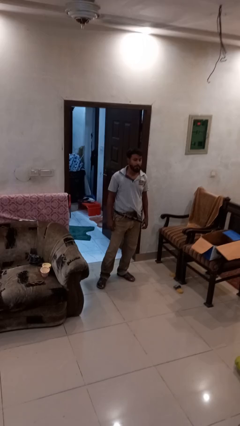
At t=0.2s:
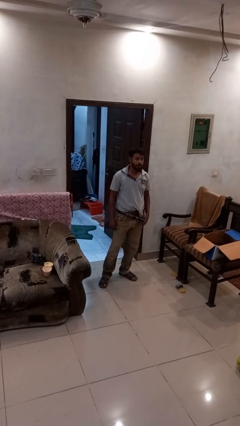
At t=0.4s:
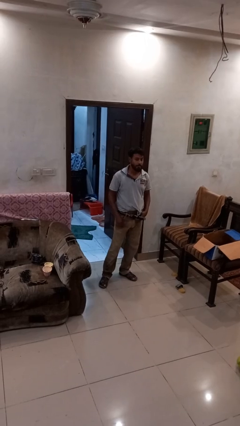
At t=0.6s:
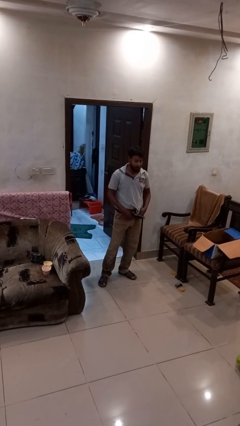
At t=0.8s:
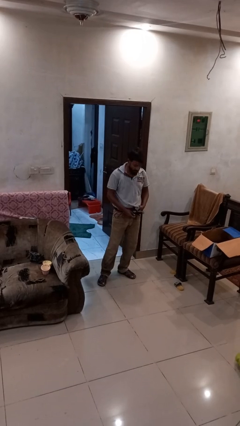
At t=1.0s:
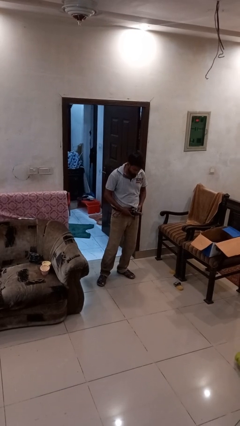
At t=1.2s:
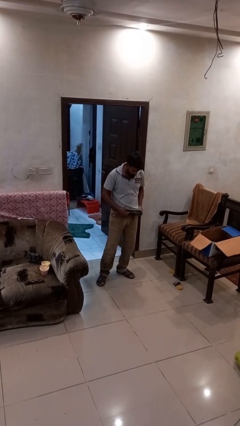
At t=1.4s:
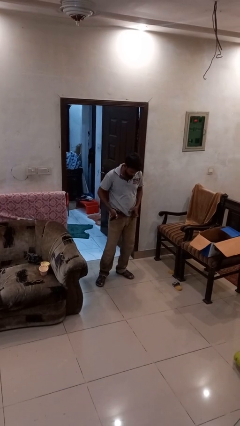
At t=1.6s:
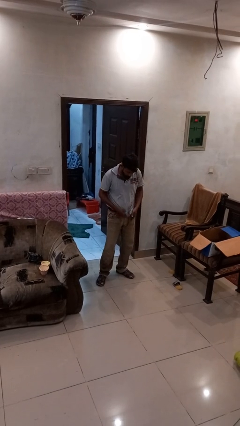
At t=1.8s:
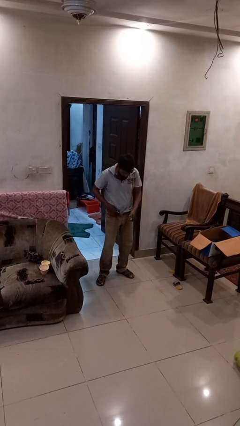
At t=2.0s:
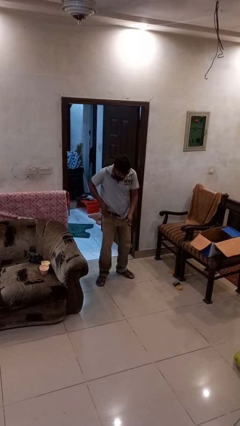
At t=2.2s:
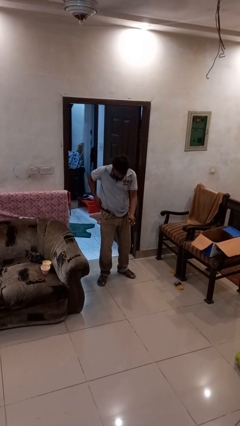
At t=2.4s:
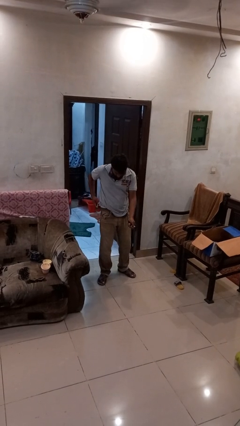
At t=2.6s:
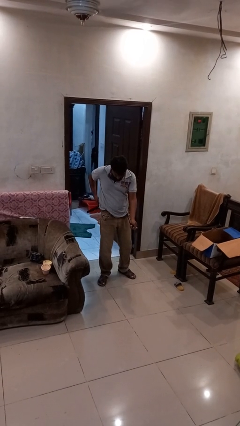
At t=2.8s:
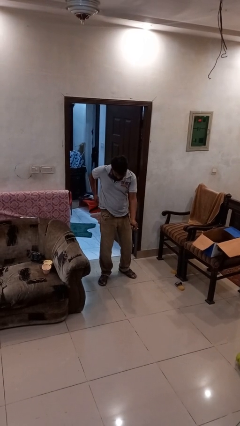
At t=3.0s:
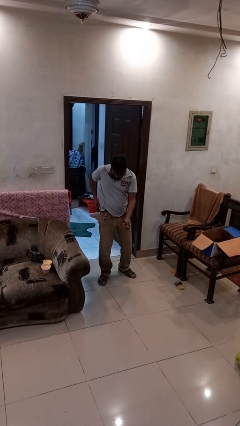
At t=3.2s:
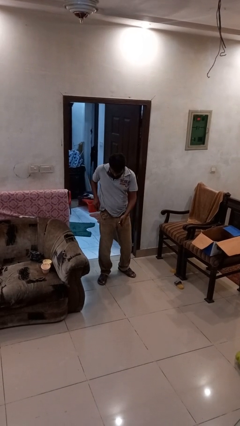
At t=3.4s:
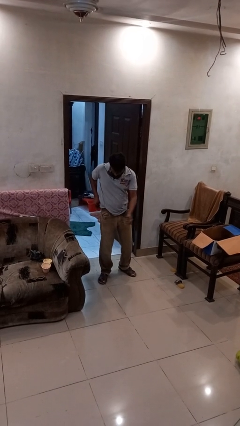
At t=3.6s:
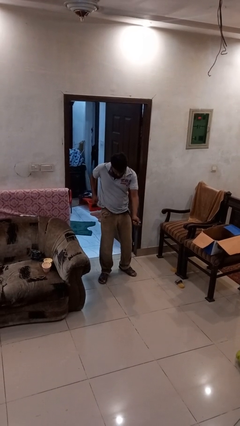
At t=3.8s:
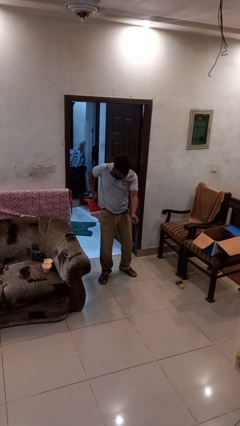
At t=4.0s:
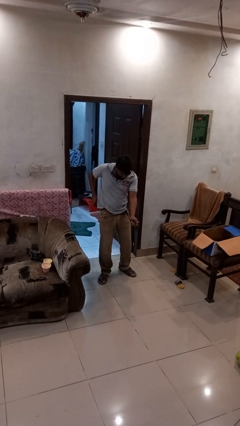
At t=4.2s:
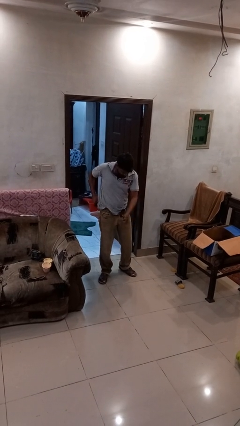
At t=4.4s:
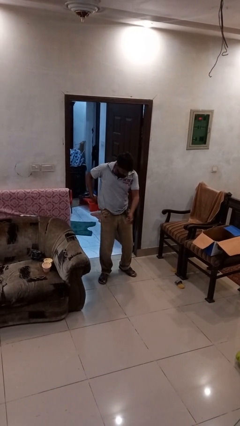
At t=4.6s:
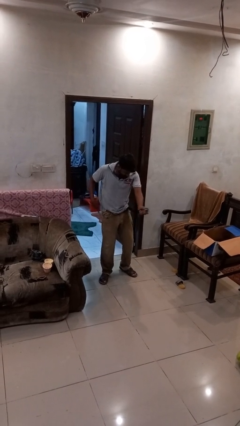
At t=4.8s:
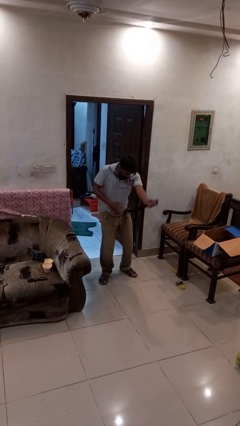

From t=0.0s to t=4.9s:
person takes off belt

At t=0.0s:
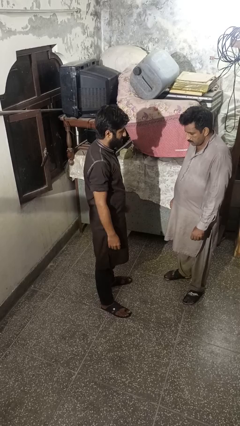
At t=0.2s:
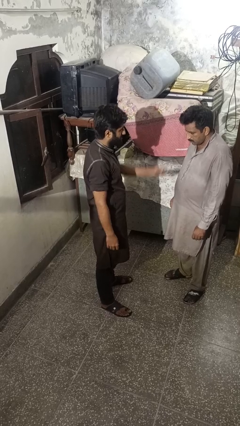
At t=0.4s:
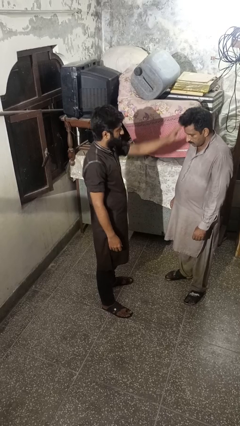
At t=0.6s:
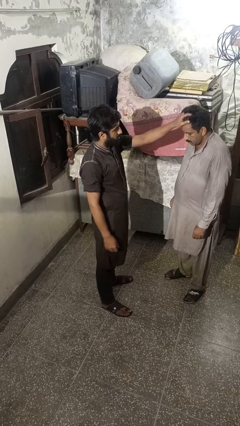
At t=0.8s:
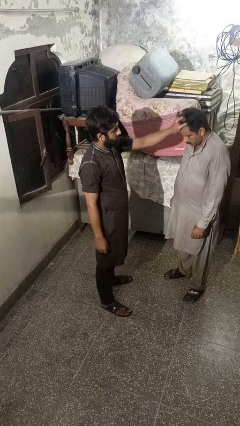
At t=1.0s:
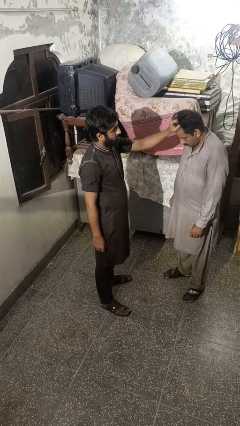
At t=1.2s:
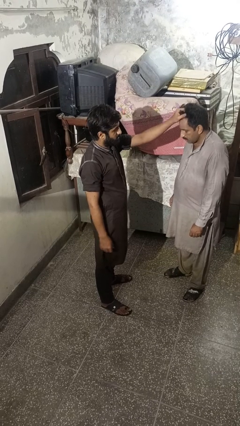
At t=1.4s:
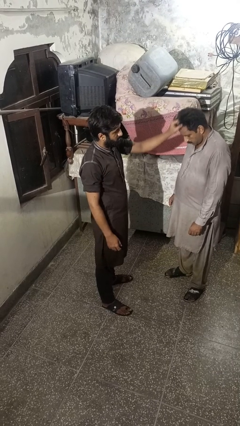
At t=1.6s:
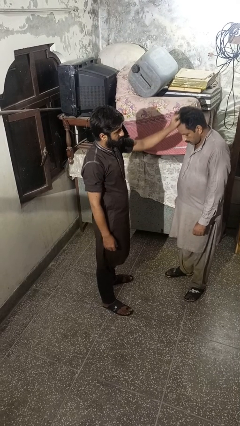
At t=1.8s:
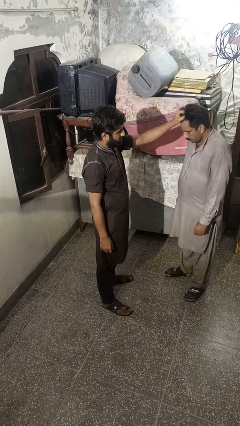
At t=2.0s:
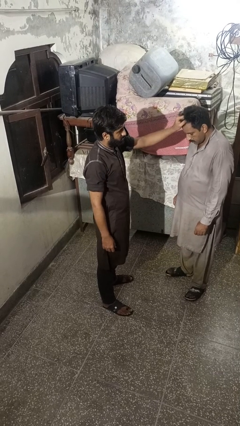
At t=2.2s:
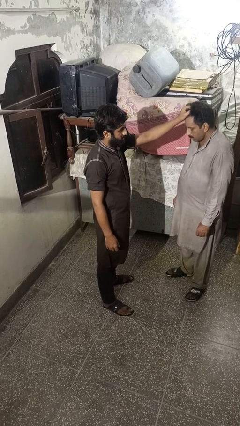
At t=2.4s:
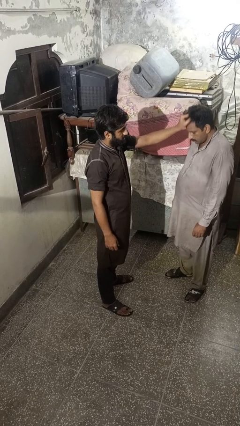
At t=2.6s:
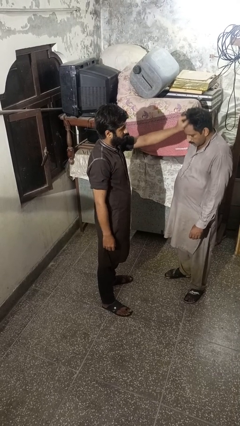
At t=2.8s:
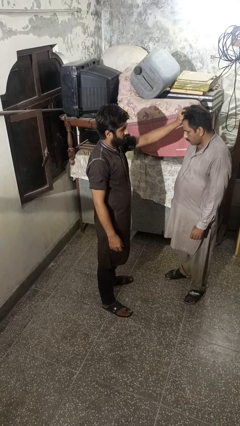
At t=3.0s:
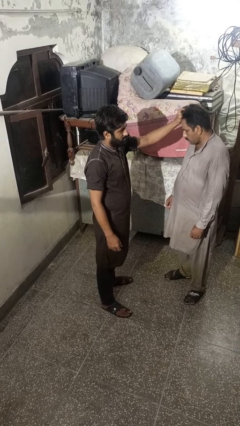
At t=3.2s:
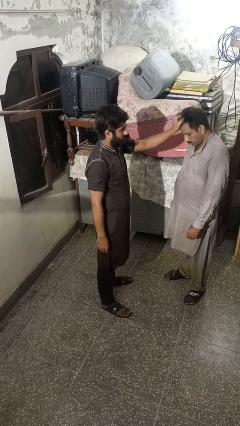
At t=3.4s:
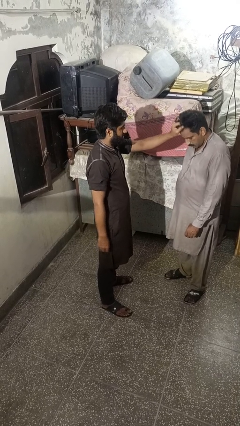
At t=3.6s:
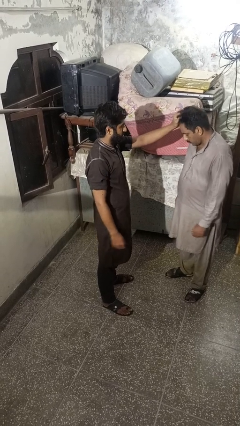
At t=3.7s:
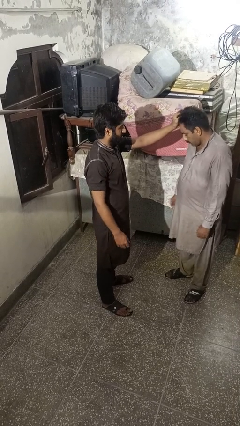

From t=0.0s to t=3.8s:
person grabs person by hair

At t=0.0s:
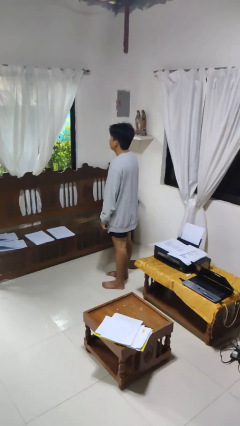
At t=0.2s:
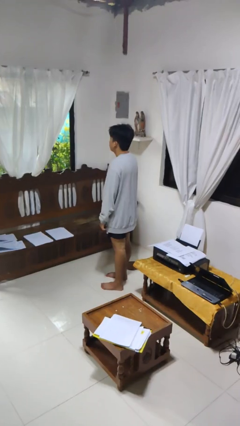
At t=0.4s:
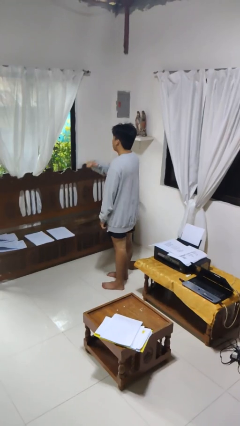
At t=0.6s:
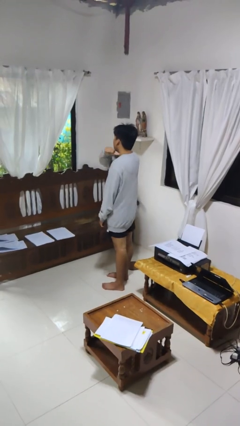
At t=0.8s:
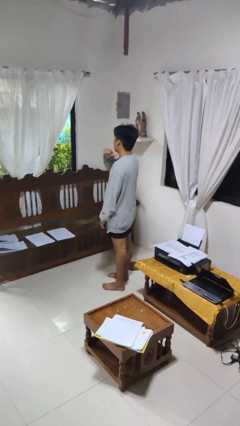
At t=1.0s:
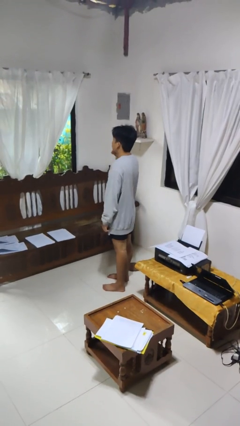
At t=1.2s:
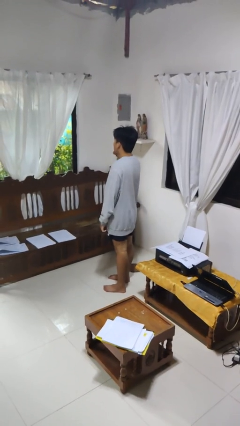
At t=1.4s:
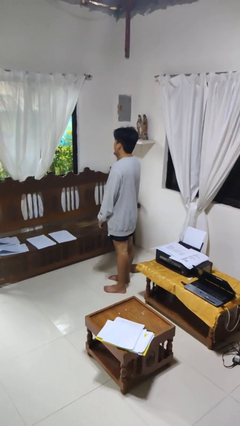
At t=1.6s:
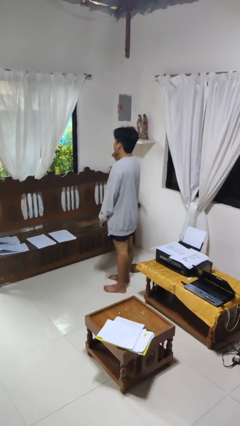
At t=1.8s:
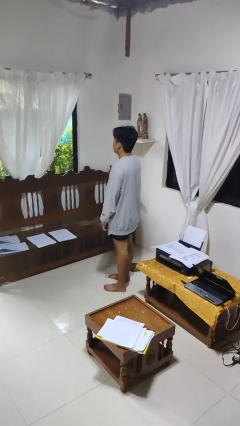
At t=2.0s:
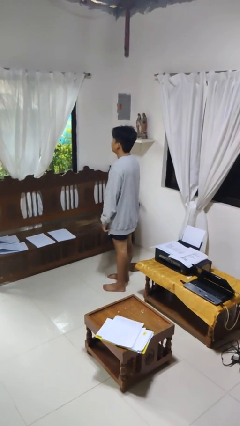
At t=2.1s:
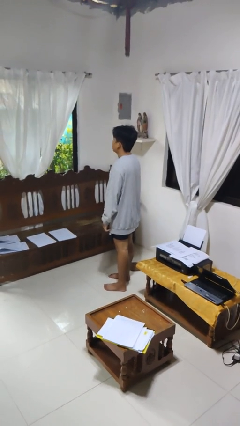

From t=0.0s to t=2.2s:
person gestures cut

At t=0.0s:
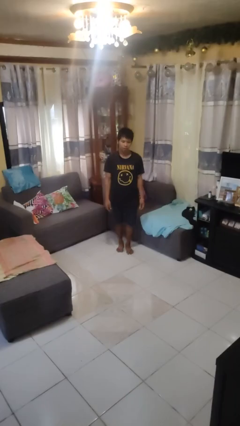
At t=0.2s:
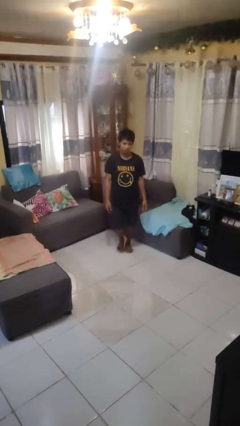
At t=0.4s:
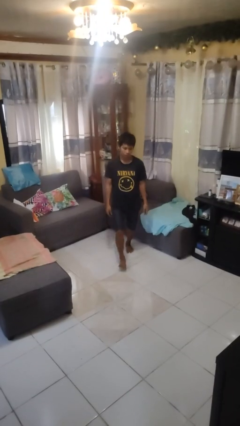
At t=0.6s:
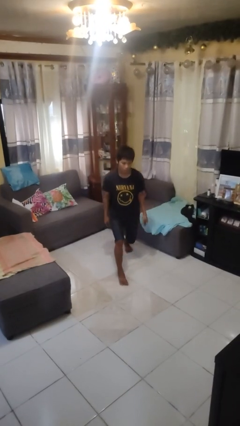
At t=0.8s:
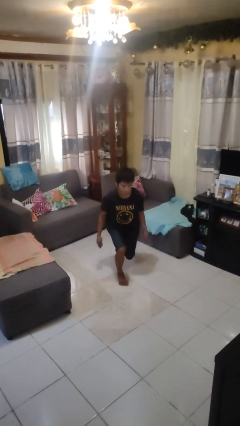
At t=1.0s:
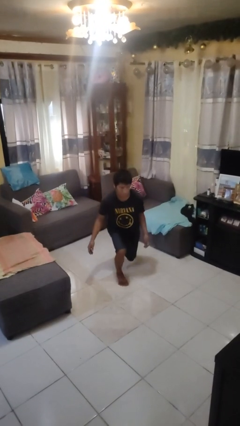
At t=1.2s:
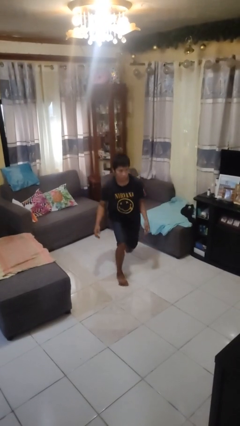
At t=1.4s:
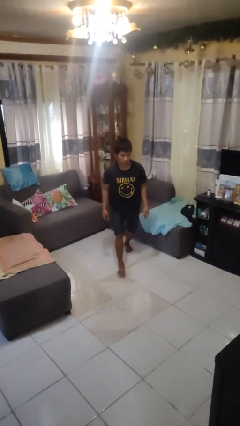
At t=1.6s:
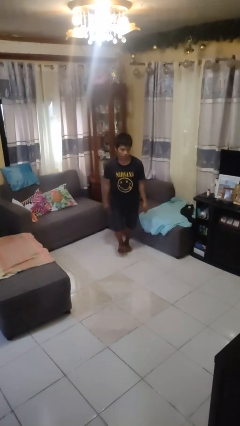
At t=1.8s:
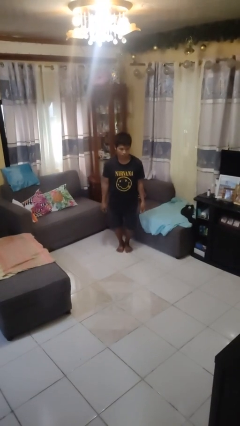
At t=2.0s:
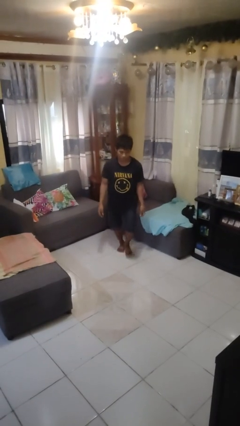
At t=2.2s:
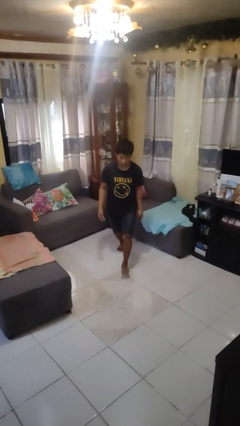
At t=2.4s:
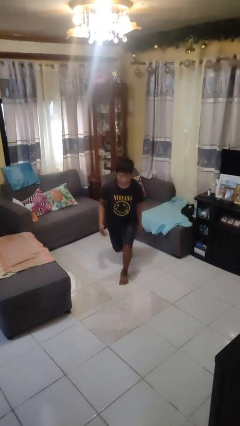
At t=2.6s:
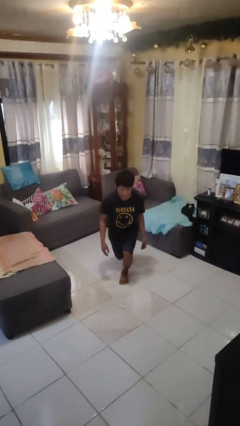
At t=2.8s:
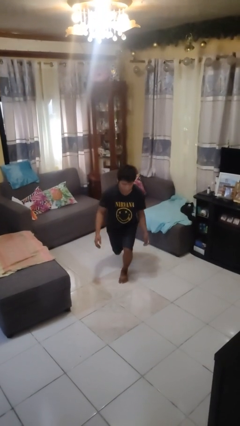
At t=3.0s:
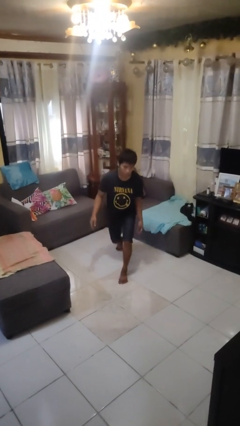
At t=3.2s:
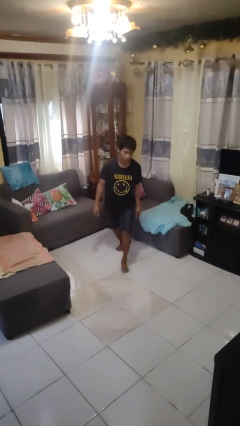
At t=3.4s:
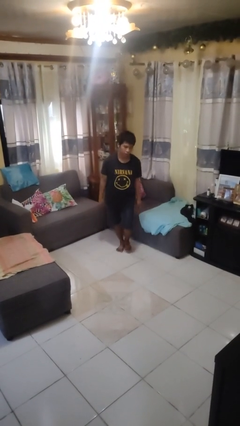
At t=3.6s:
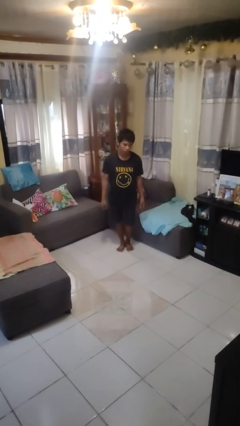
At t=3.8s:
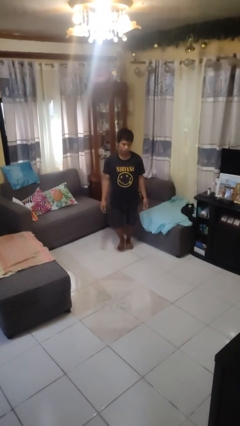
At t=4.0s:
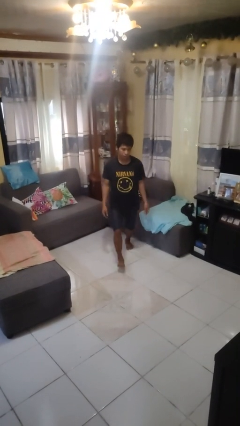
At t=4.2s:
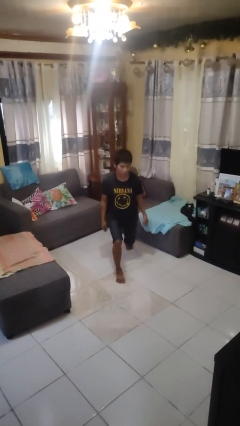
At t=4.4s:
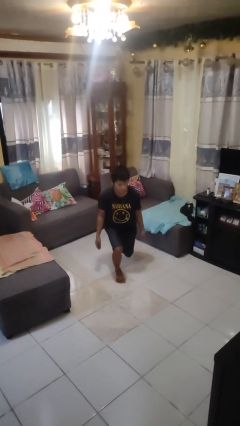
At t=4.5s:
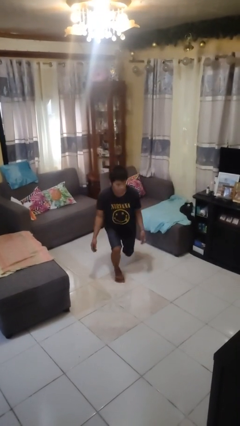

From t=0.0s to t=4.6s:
person exercises with lunges

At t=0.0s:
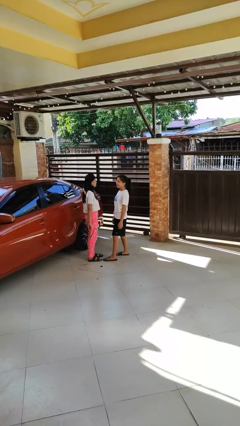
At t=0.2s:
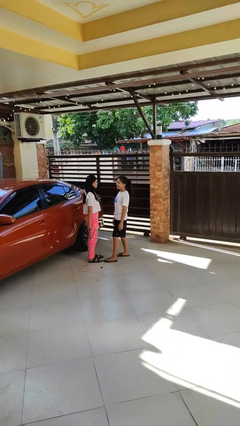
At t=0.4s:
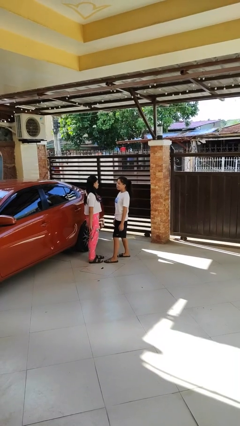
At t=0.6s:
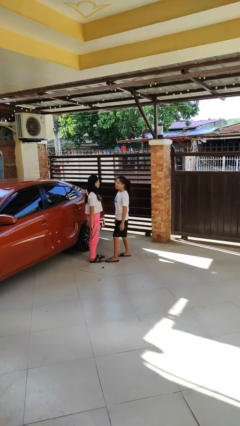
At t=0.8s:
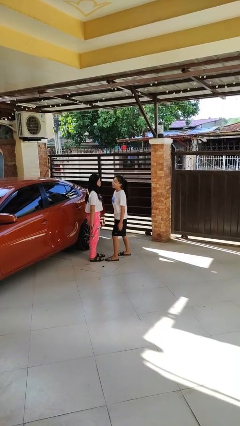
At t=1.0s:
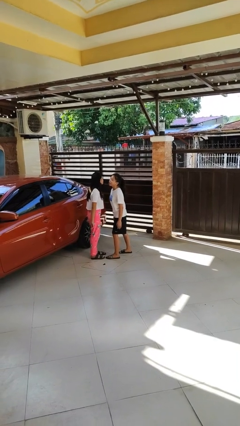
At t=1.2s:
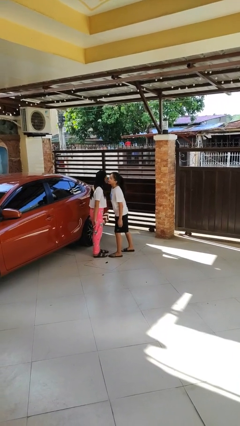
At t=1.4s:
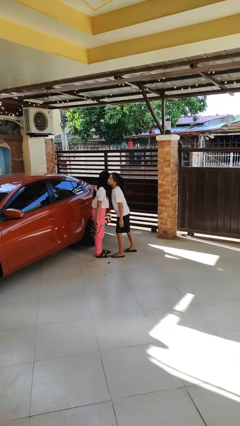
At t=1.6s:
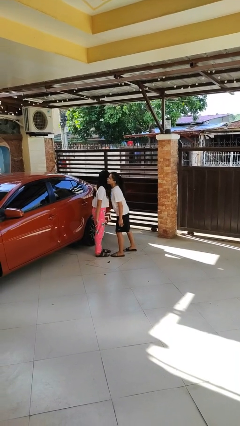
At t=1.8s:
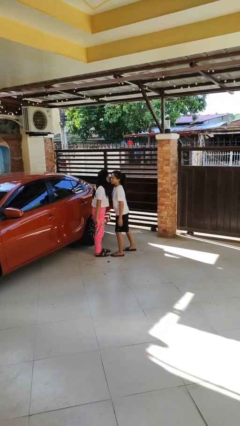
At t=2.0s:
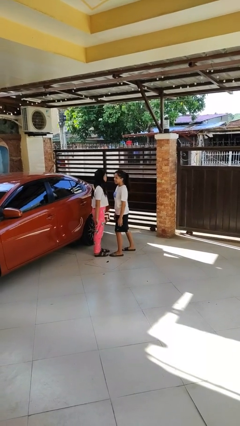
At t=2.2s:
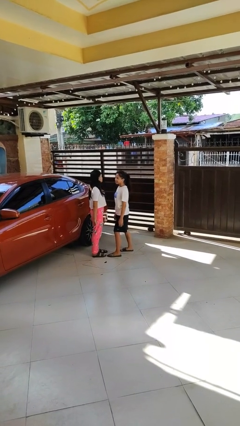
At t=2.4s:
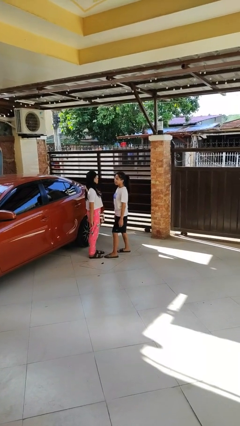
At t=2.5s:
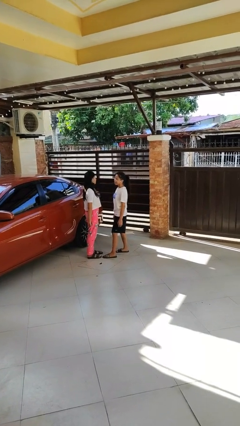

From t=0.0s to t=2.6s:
person kisses cheek of person
